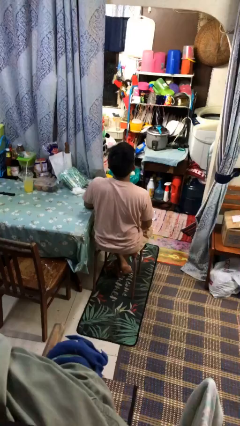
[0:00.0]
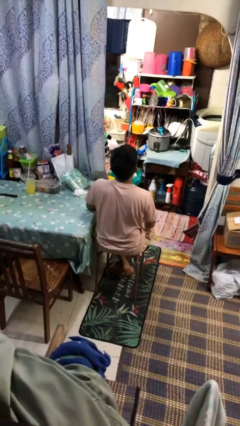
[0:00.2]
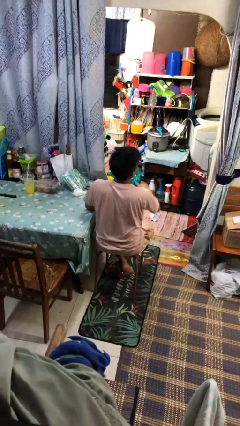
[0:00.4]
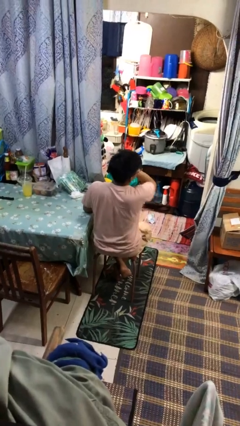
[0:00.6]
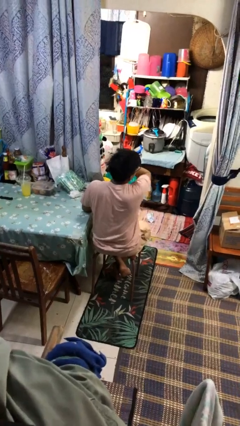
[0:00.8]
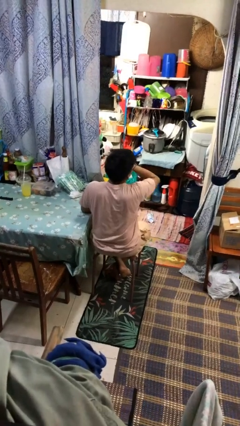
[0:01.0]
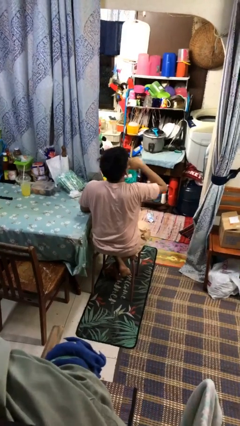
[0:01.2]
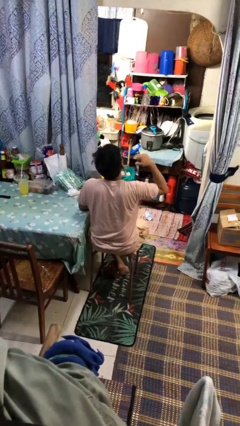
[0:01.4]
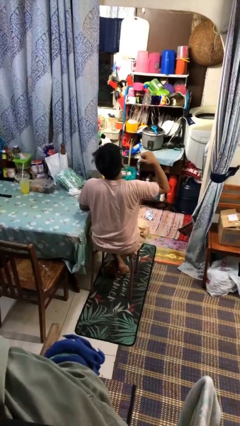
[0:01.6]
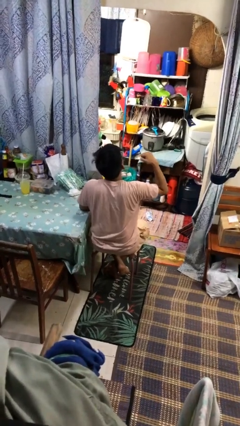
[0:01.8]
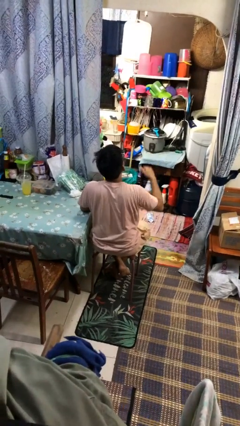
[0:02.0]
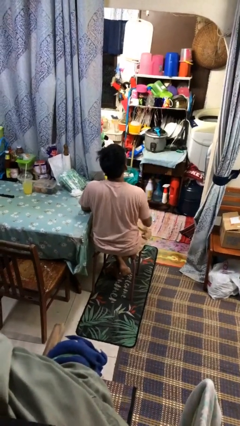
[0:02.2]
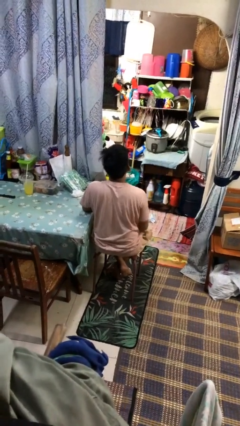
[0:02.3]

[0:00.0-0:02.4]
person gestures cut

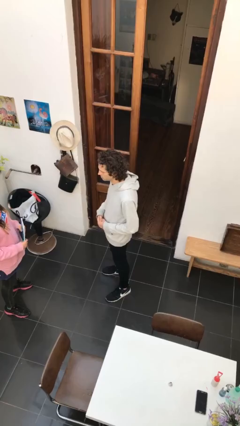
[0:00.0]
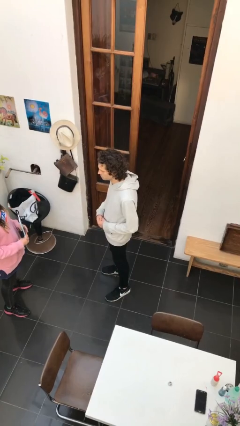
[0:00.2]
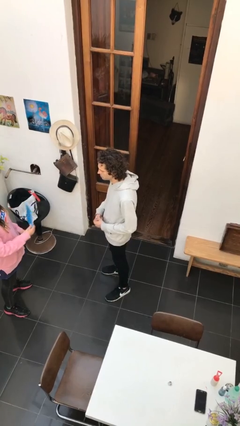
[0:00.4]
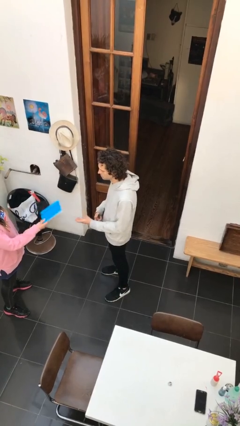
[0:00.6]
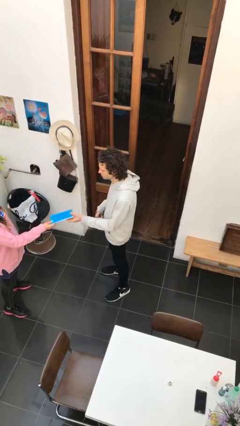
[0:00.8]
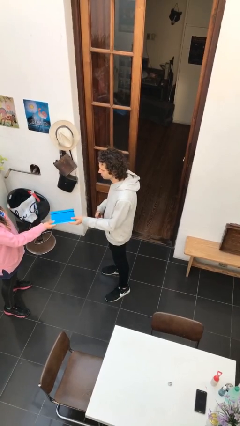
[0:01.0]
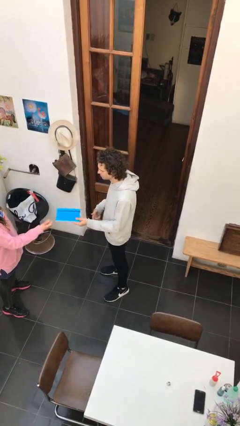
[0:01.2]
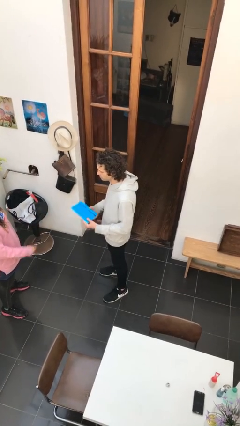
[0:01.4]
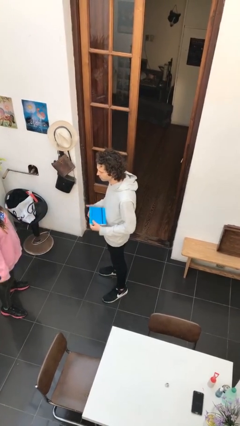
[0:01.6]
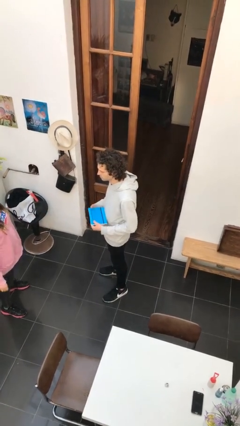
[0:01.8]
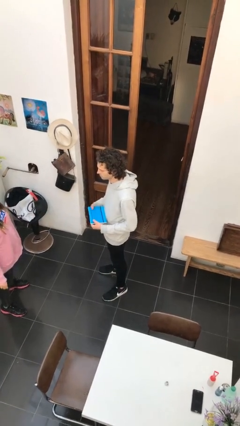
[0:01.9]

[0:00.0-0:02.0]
person transfers object to person

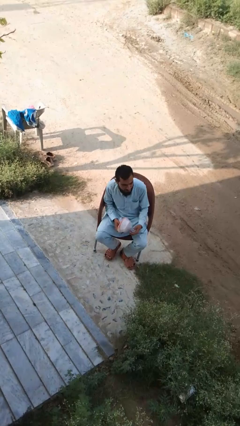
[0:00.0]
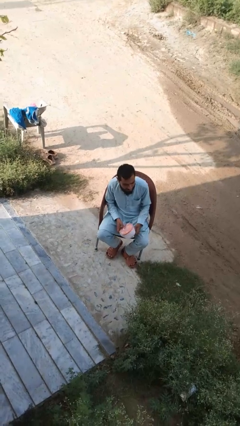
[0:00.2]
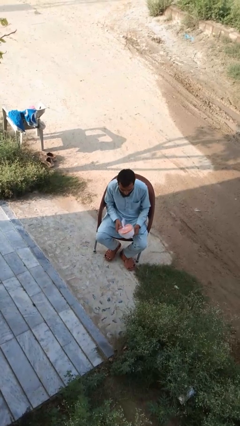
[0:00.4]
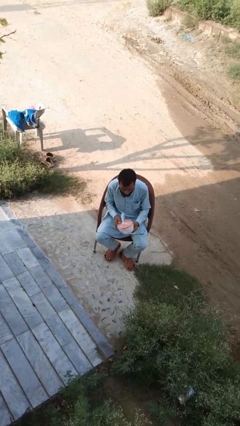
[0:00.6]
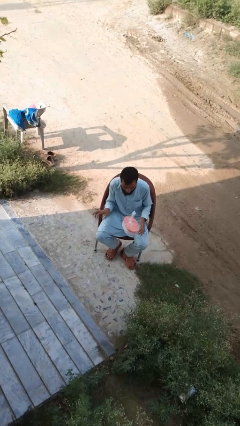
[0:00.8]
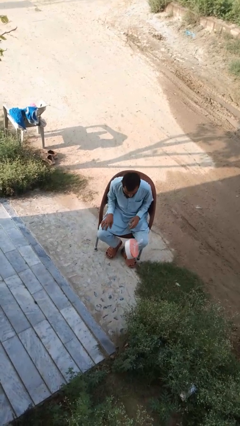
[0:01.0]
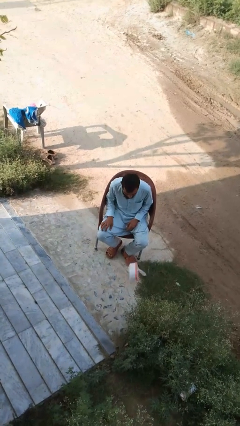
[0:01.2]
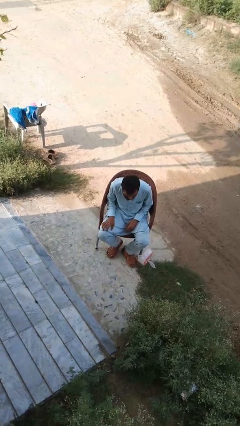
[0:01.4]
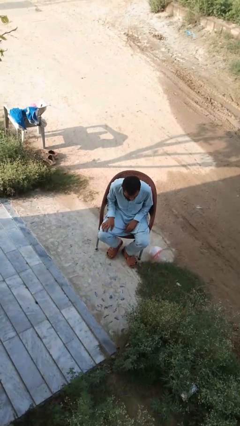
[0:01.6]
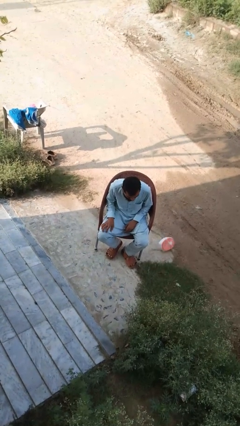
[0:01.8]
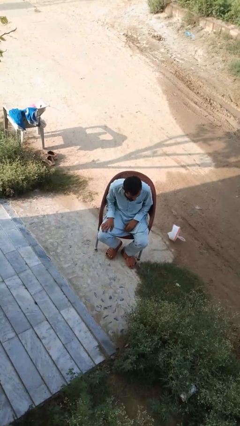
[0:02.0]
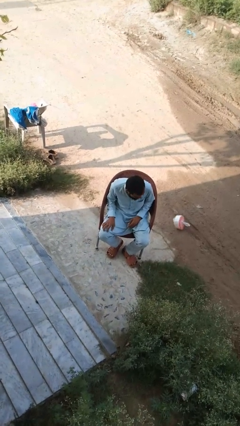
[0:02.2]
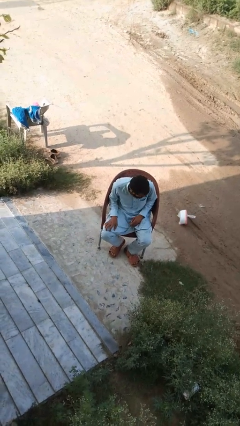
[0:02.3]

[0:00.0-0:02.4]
person drops object

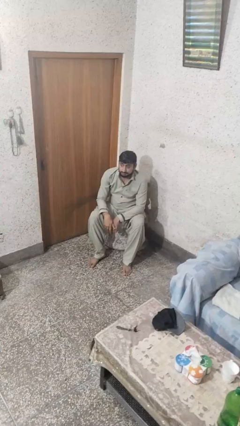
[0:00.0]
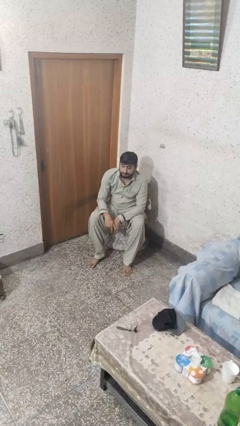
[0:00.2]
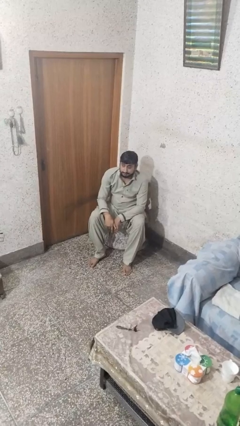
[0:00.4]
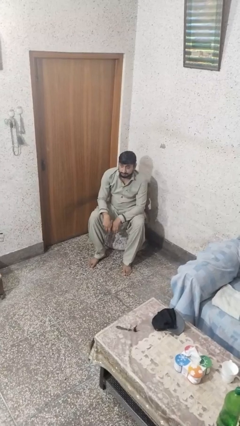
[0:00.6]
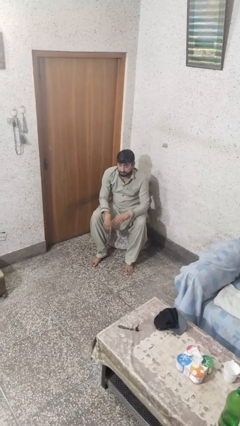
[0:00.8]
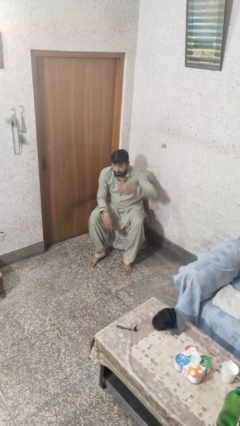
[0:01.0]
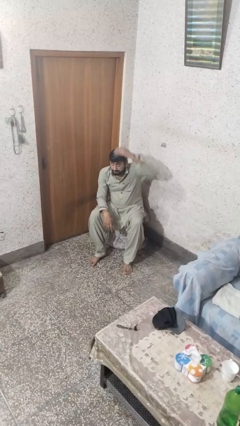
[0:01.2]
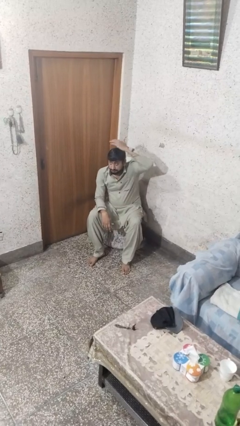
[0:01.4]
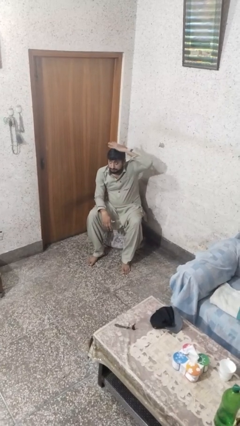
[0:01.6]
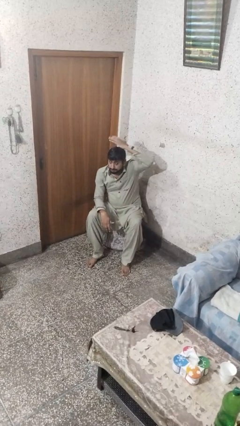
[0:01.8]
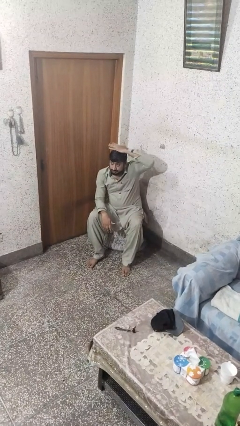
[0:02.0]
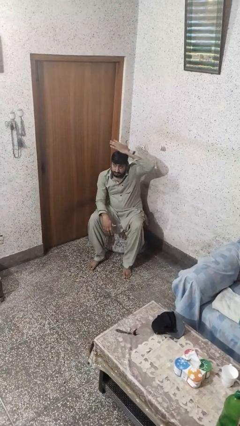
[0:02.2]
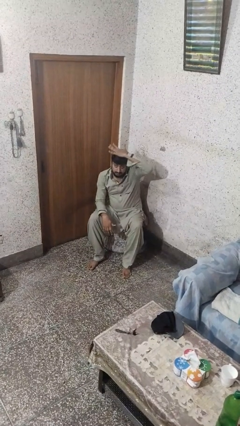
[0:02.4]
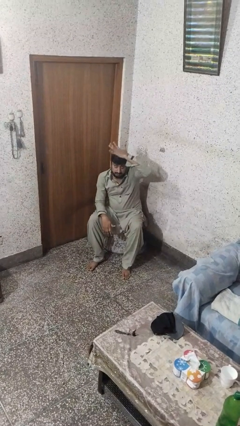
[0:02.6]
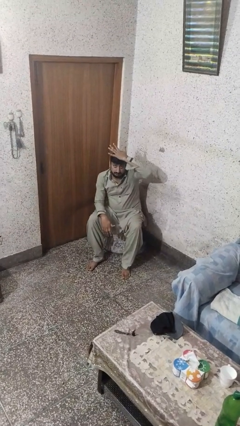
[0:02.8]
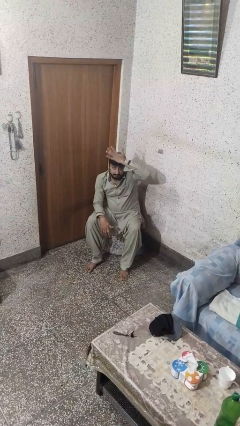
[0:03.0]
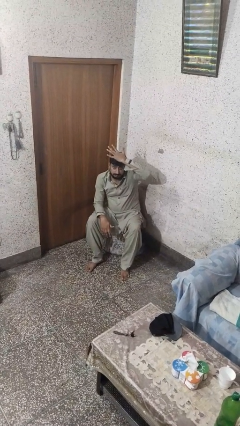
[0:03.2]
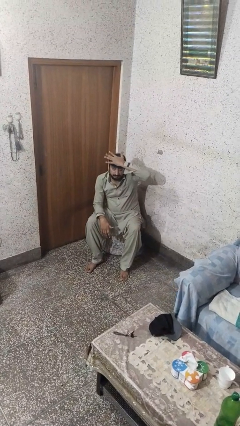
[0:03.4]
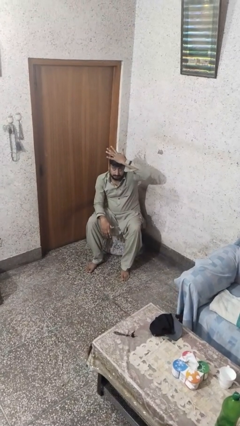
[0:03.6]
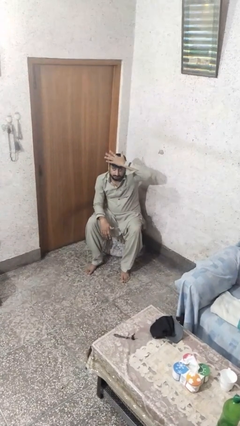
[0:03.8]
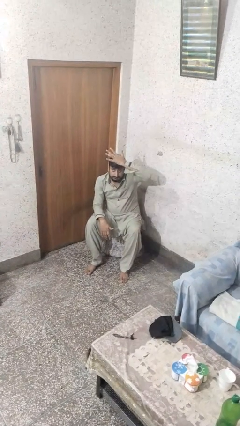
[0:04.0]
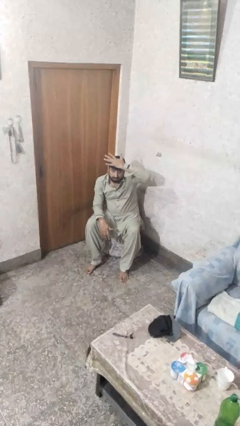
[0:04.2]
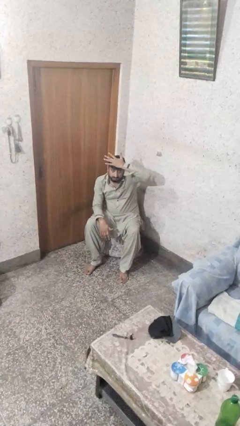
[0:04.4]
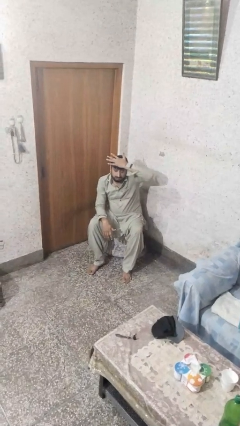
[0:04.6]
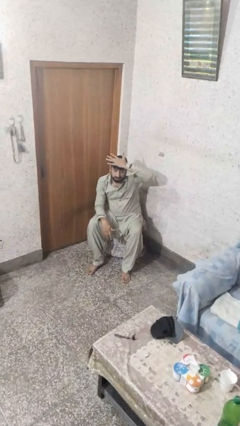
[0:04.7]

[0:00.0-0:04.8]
person pats head

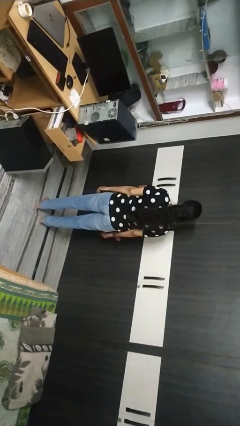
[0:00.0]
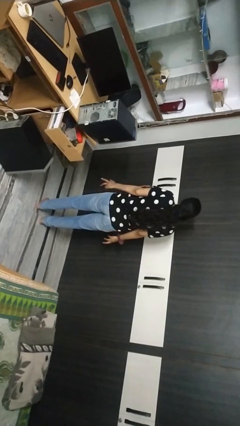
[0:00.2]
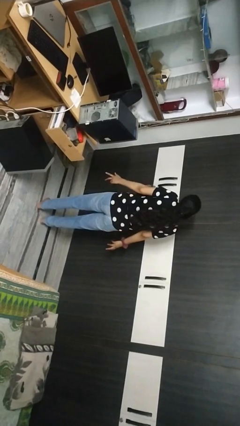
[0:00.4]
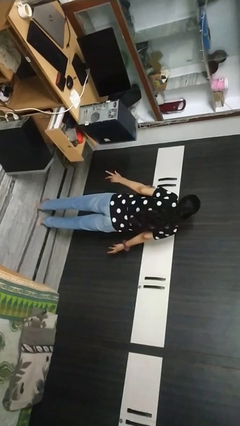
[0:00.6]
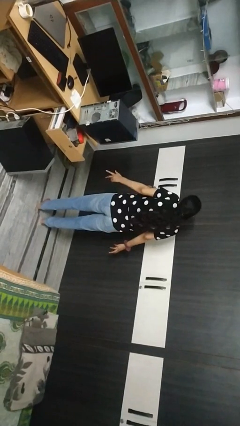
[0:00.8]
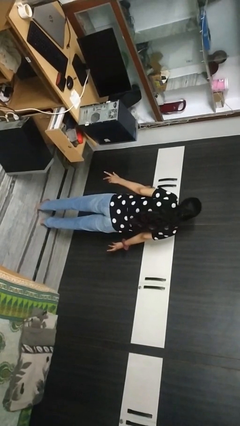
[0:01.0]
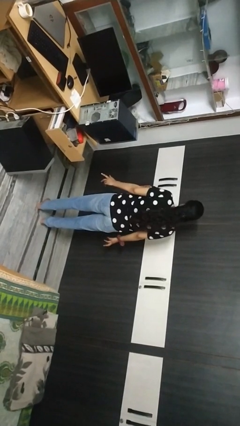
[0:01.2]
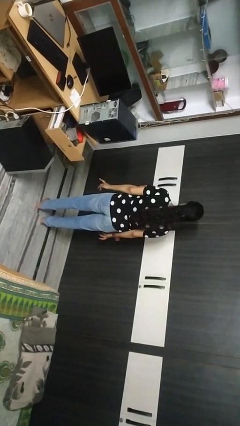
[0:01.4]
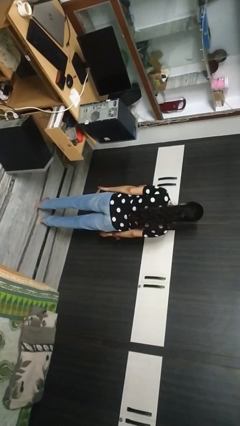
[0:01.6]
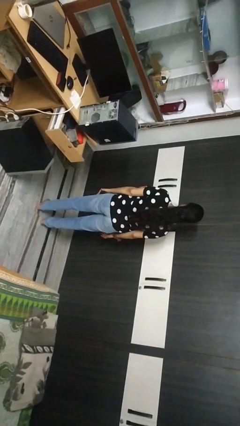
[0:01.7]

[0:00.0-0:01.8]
person shrugs

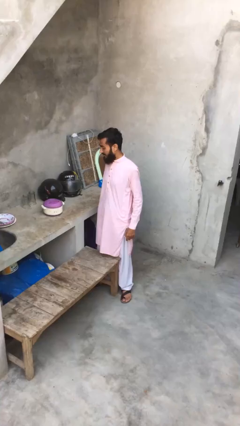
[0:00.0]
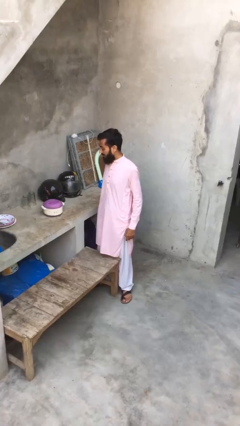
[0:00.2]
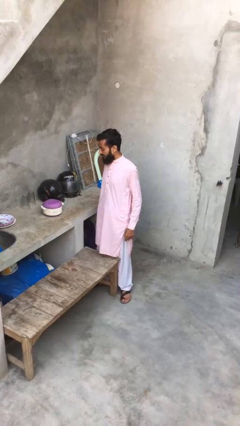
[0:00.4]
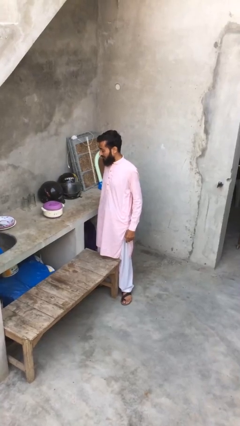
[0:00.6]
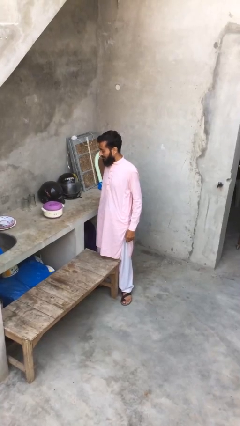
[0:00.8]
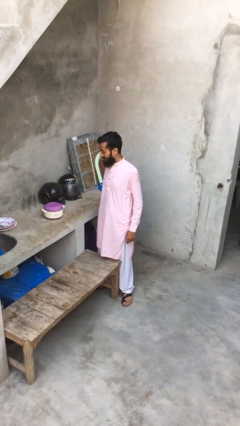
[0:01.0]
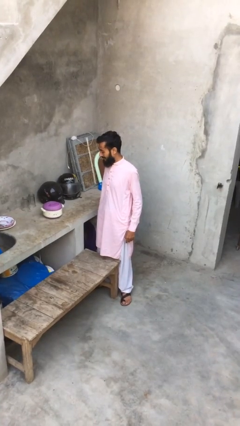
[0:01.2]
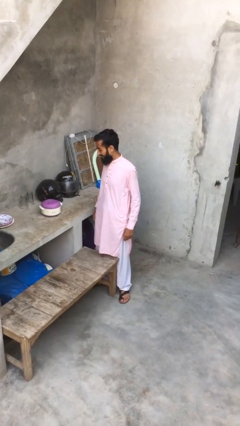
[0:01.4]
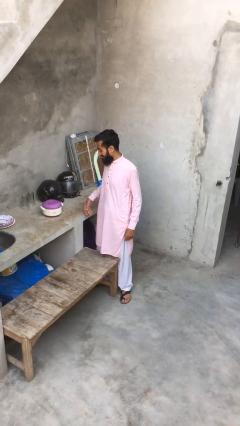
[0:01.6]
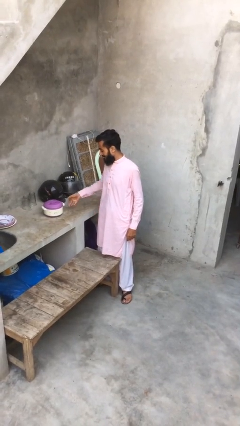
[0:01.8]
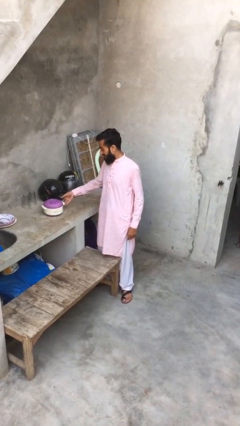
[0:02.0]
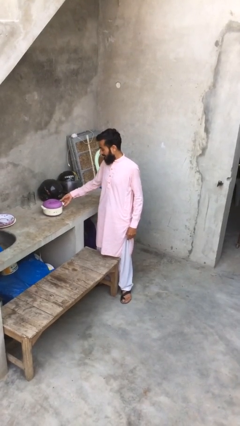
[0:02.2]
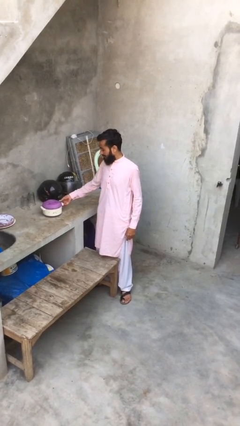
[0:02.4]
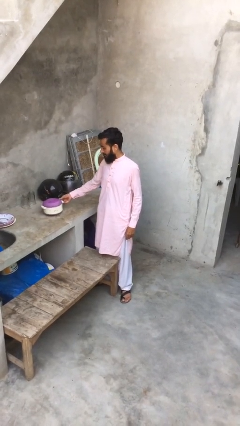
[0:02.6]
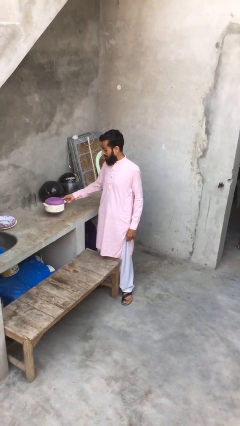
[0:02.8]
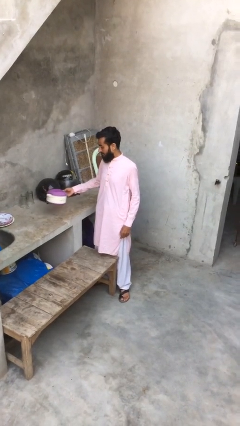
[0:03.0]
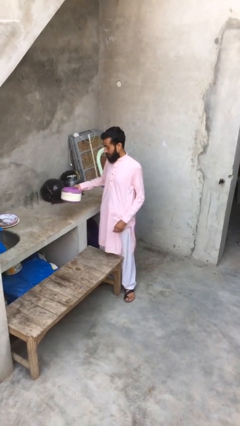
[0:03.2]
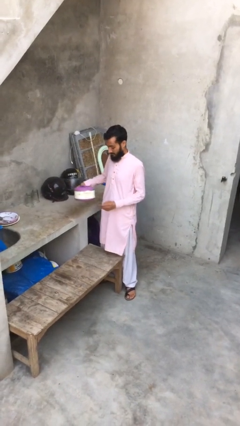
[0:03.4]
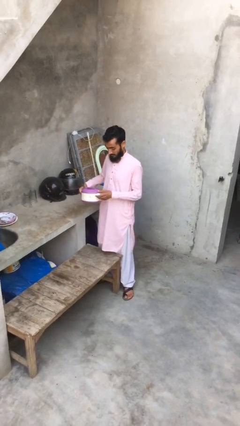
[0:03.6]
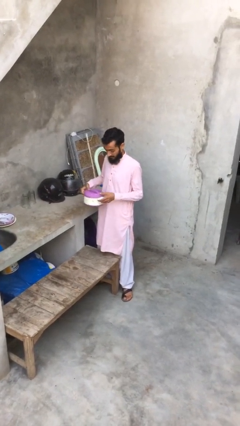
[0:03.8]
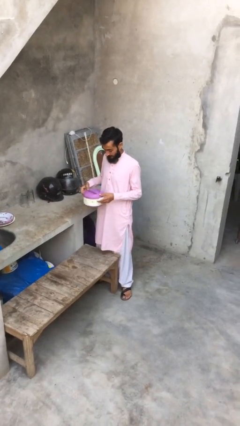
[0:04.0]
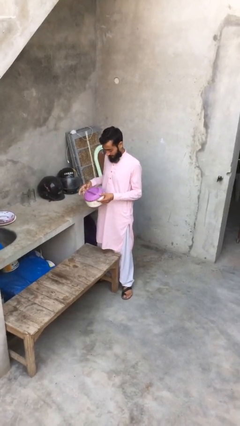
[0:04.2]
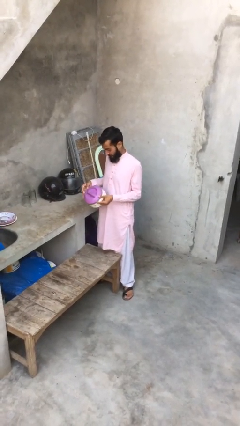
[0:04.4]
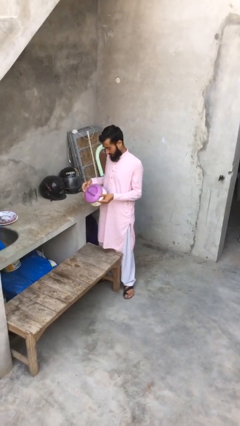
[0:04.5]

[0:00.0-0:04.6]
person picks up object from shelf
